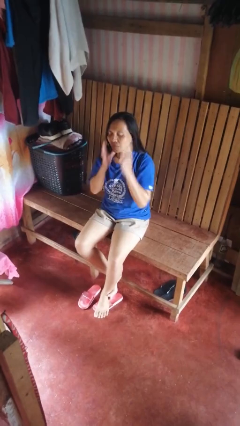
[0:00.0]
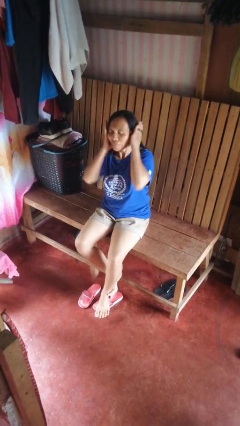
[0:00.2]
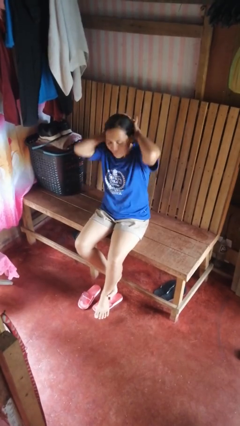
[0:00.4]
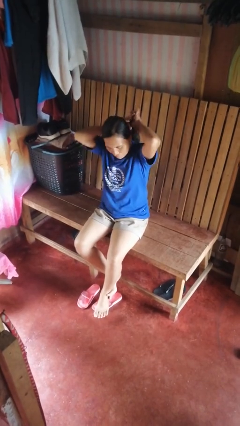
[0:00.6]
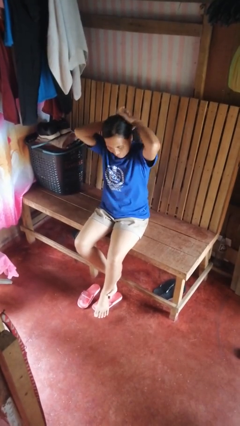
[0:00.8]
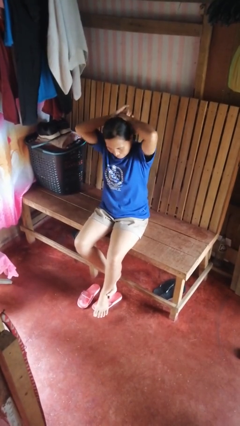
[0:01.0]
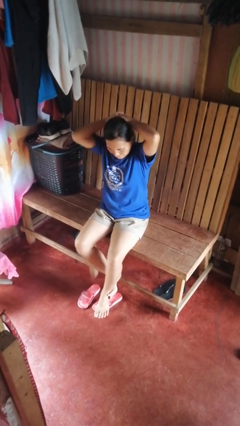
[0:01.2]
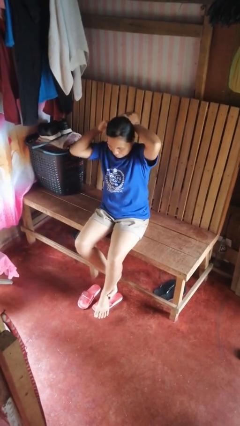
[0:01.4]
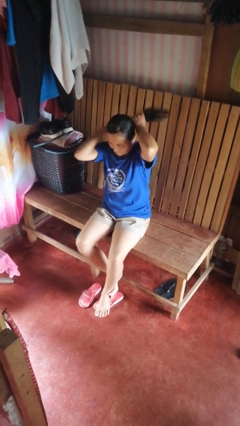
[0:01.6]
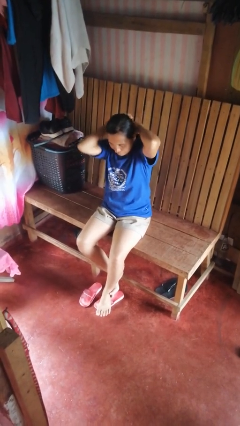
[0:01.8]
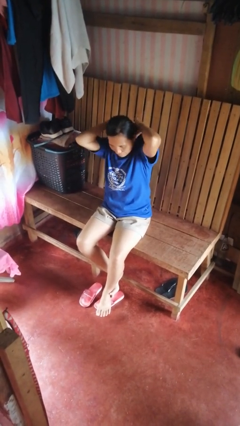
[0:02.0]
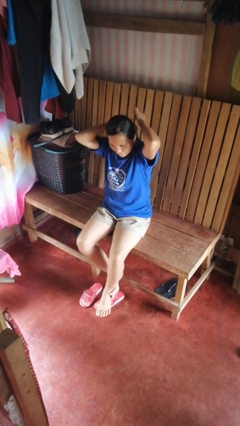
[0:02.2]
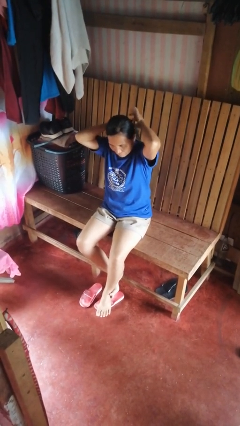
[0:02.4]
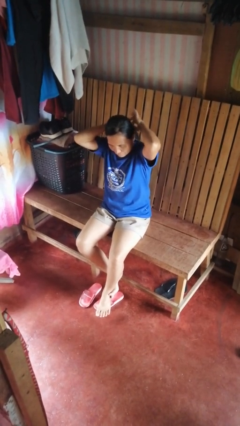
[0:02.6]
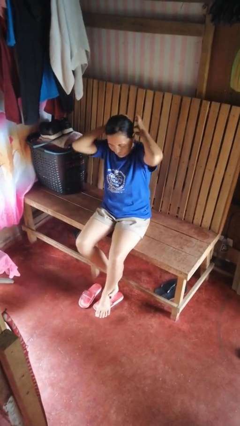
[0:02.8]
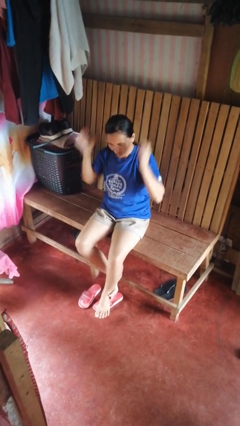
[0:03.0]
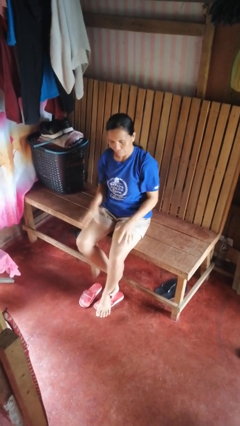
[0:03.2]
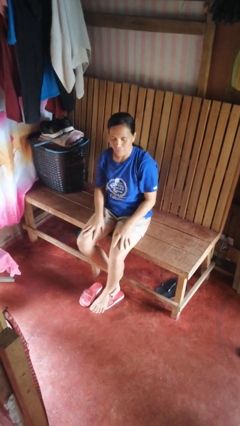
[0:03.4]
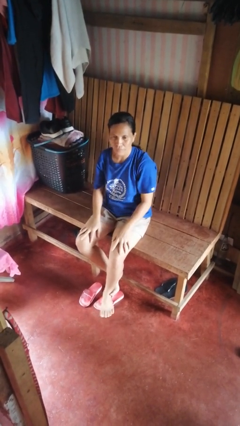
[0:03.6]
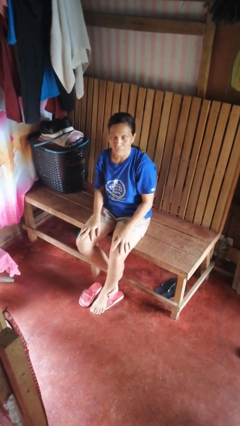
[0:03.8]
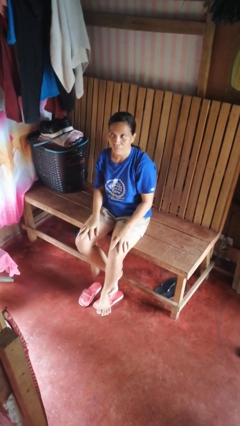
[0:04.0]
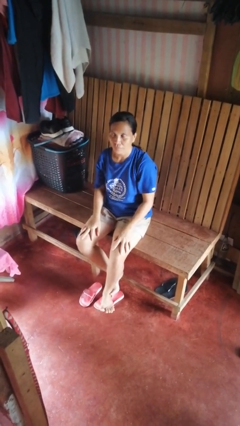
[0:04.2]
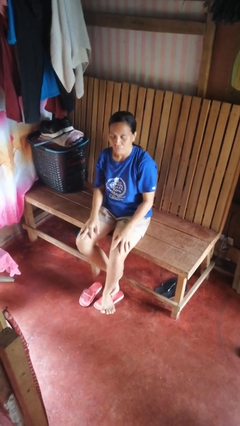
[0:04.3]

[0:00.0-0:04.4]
person puts hair in ponytail

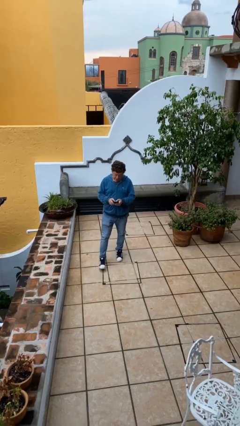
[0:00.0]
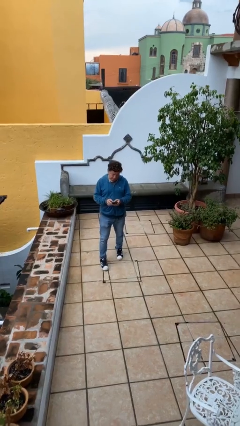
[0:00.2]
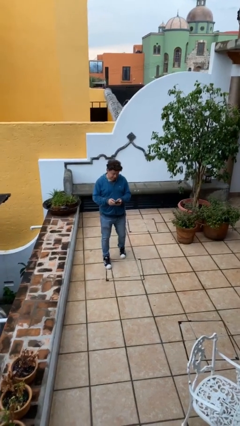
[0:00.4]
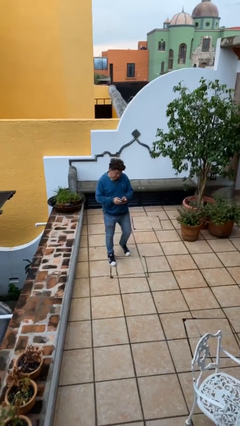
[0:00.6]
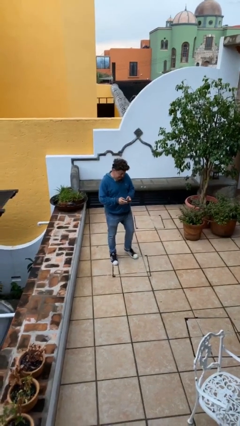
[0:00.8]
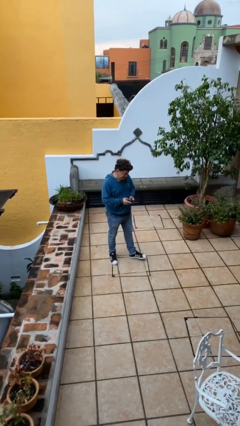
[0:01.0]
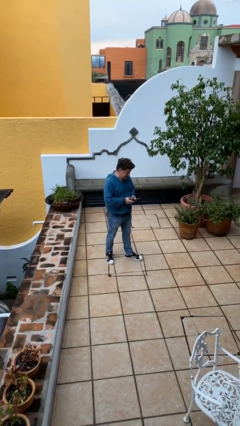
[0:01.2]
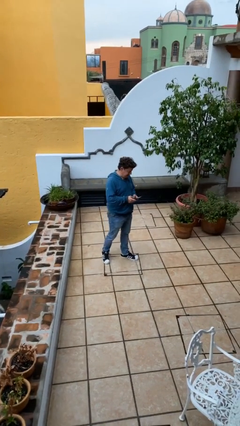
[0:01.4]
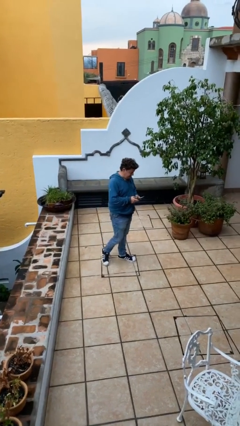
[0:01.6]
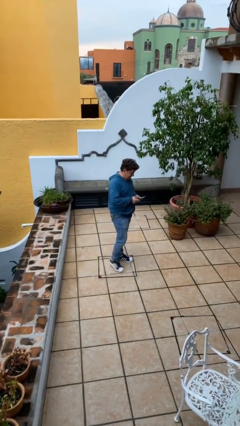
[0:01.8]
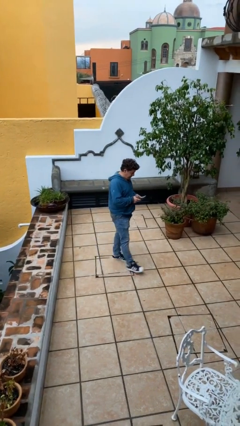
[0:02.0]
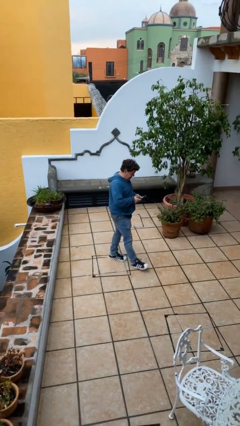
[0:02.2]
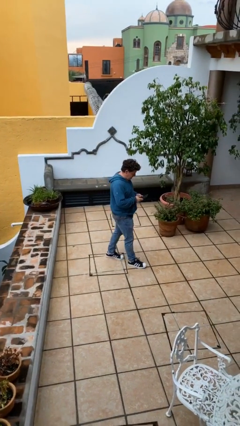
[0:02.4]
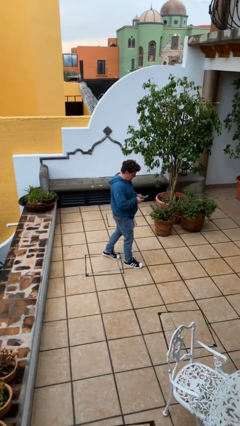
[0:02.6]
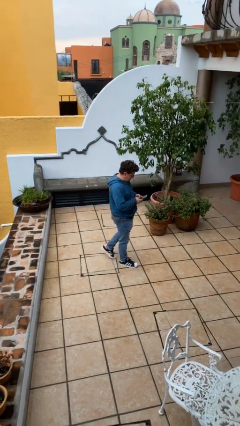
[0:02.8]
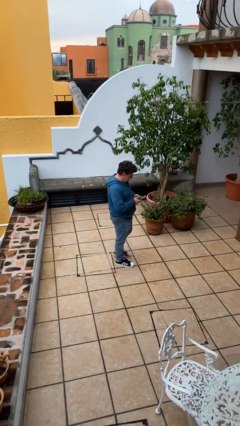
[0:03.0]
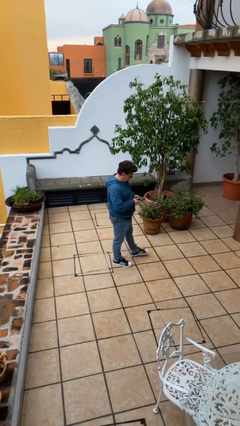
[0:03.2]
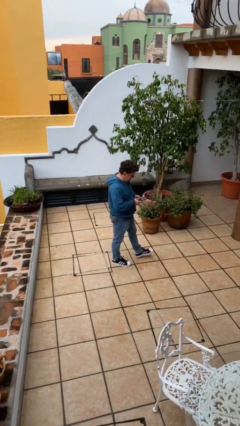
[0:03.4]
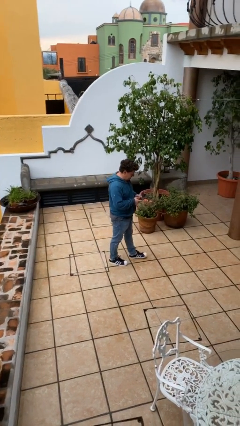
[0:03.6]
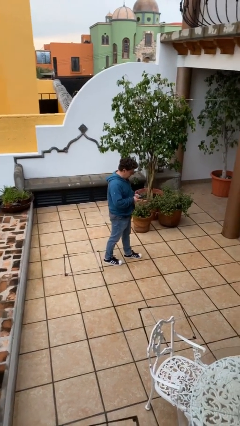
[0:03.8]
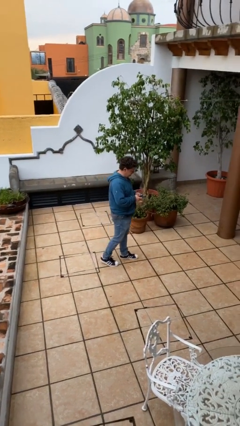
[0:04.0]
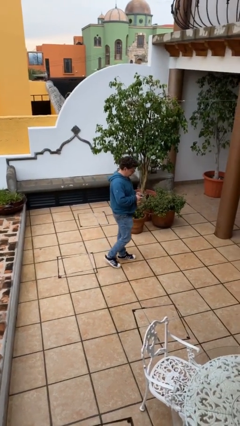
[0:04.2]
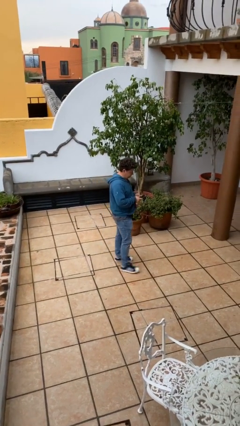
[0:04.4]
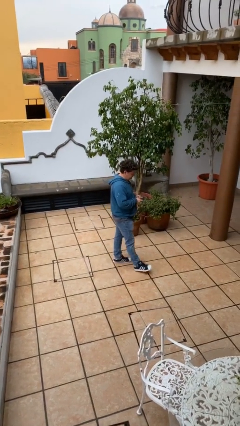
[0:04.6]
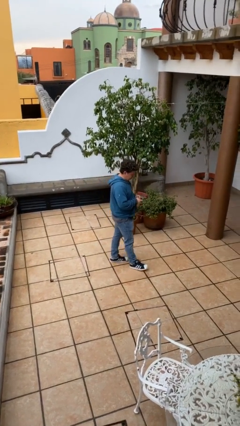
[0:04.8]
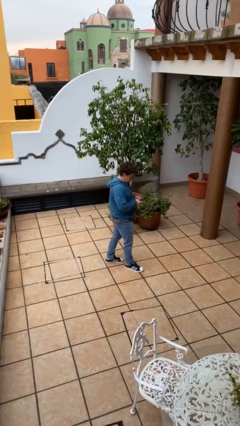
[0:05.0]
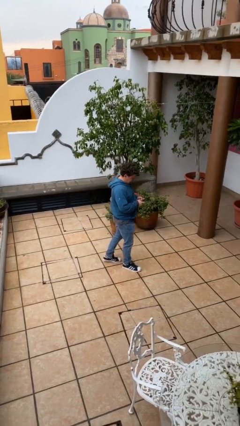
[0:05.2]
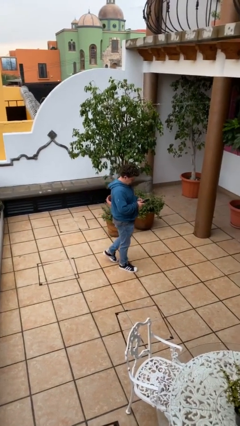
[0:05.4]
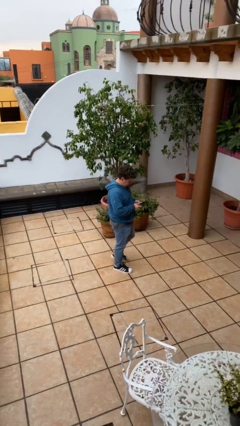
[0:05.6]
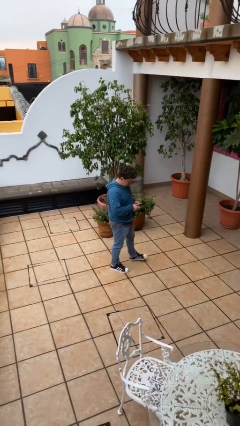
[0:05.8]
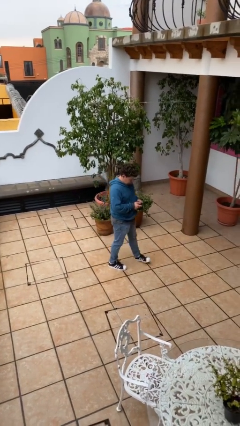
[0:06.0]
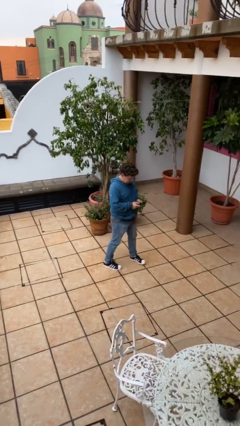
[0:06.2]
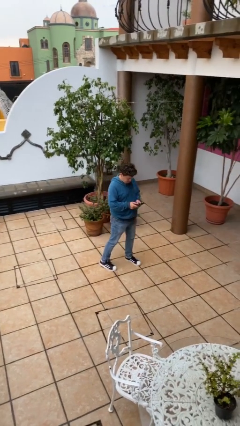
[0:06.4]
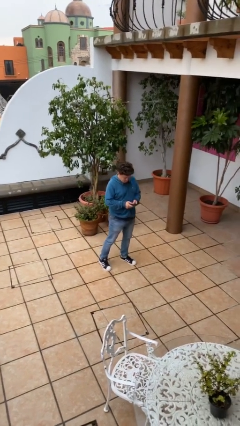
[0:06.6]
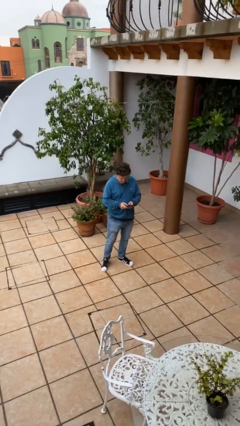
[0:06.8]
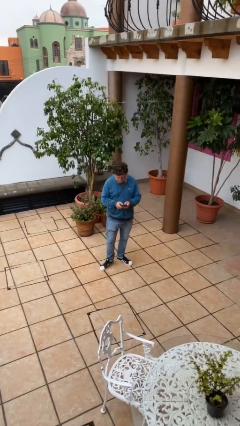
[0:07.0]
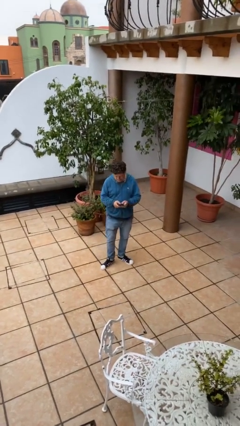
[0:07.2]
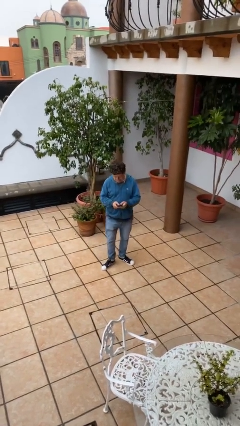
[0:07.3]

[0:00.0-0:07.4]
person texts on phone

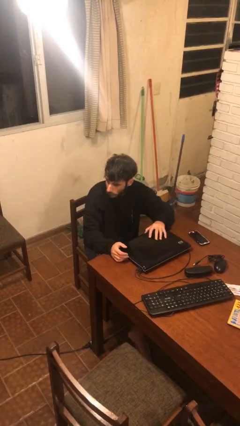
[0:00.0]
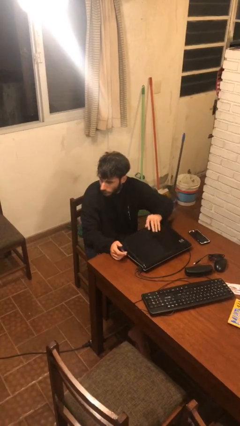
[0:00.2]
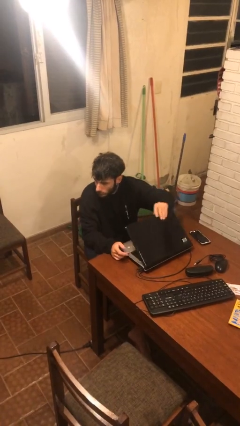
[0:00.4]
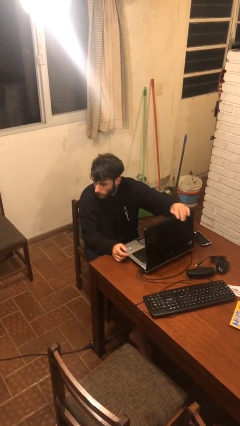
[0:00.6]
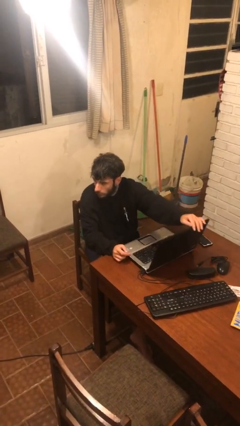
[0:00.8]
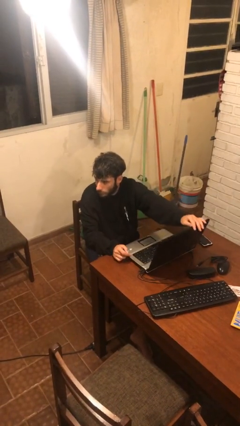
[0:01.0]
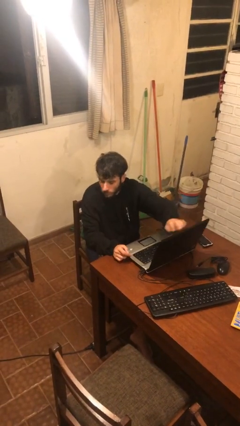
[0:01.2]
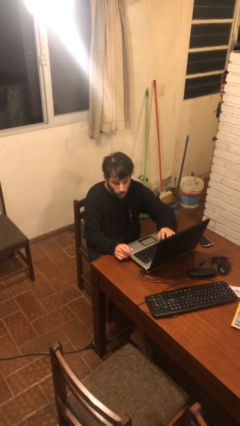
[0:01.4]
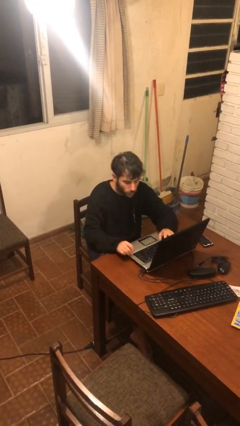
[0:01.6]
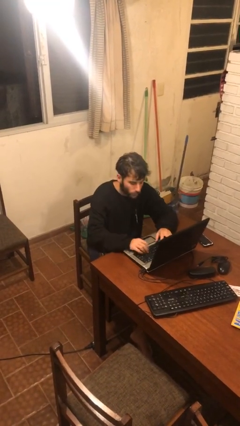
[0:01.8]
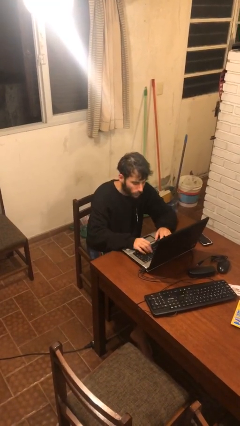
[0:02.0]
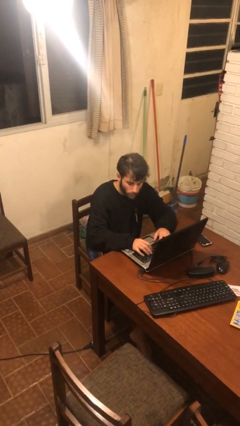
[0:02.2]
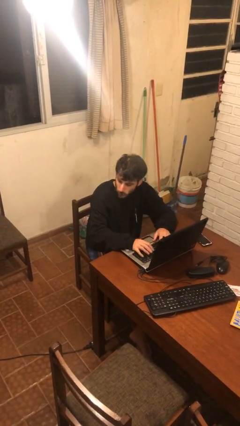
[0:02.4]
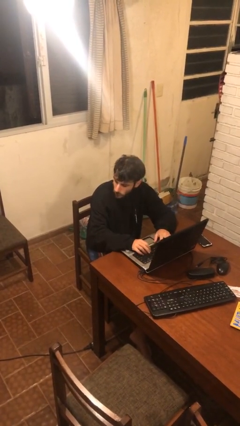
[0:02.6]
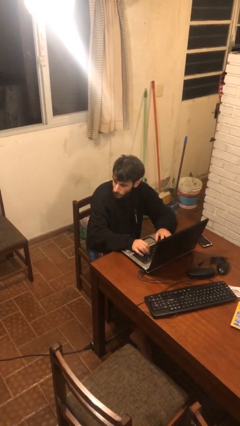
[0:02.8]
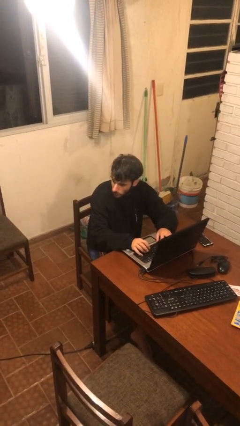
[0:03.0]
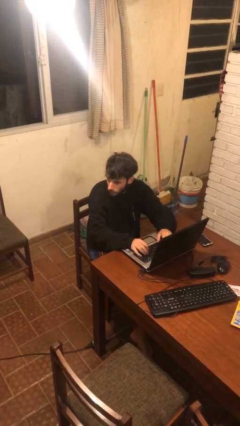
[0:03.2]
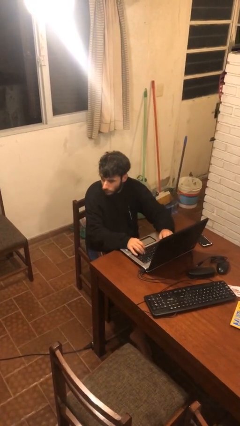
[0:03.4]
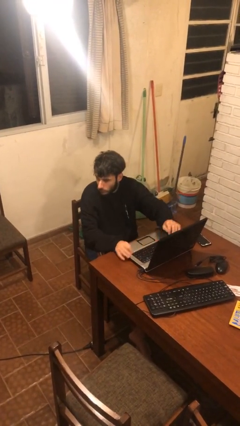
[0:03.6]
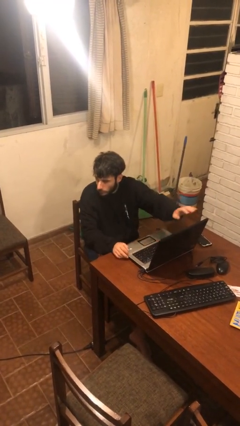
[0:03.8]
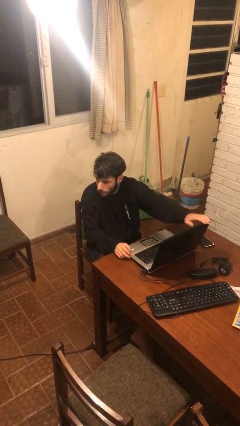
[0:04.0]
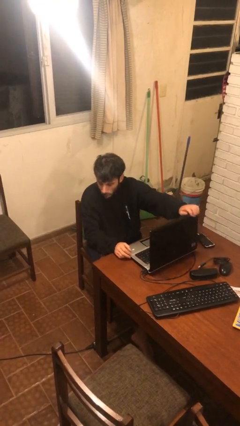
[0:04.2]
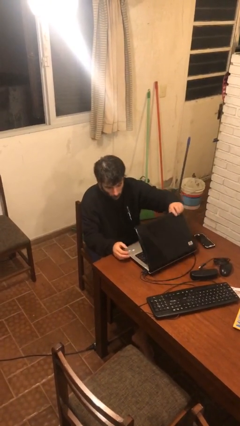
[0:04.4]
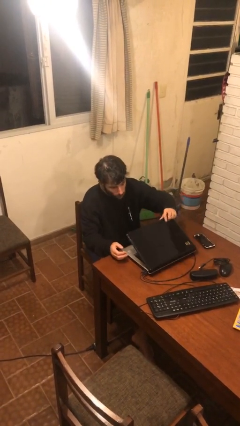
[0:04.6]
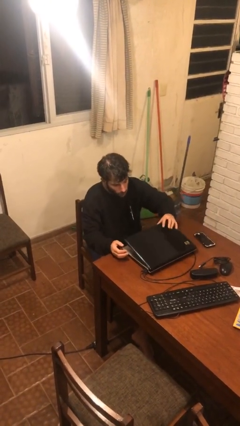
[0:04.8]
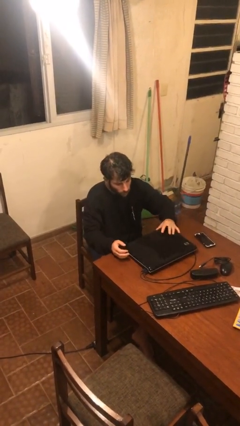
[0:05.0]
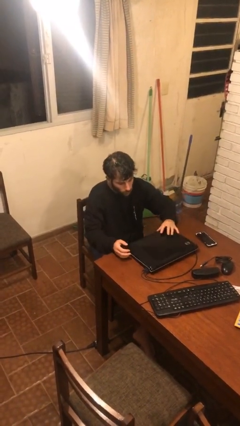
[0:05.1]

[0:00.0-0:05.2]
person interacts with laptop

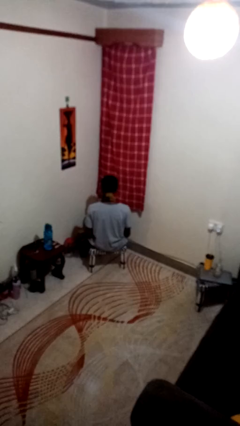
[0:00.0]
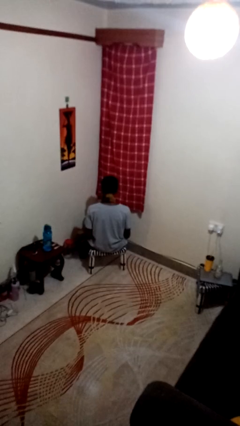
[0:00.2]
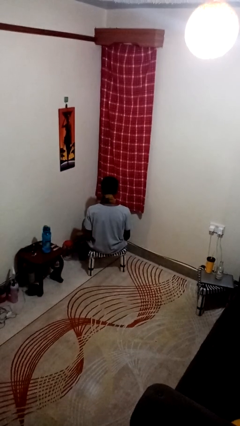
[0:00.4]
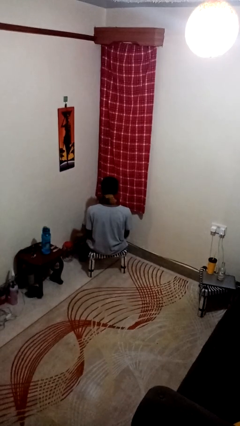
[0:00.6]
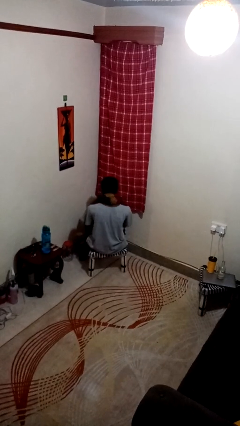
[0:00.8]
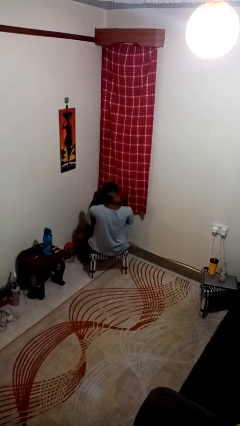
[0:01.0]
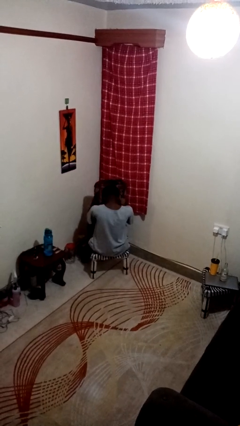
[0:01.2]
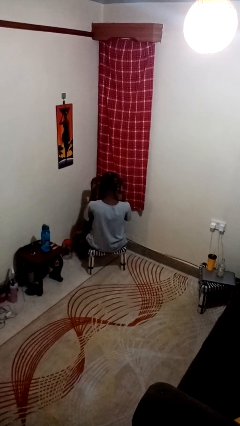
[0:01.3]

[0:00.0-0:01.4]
person puts on scarf
